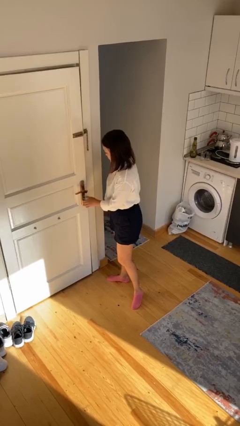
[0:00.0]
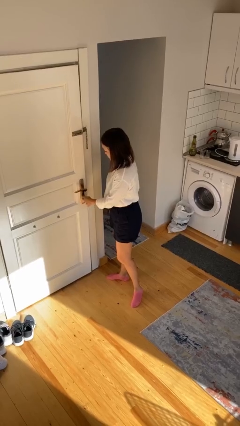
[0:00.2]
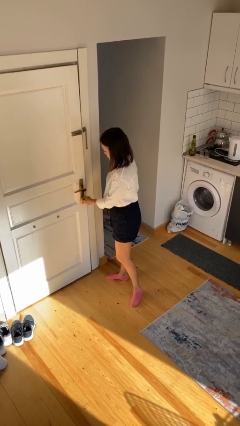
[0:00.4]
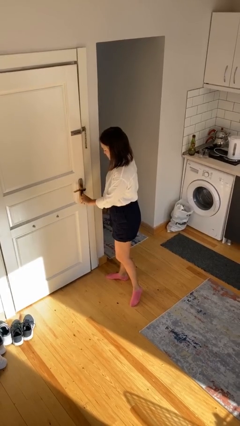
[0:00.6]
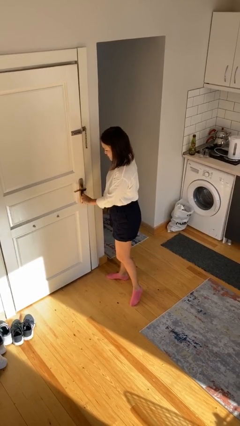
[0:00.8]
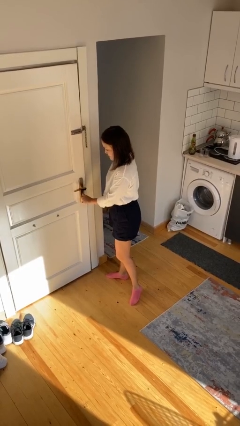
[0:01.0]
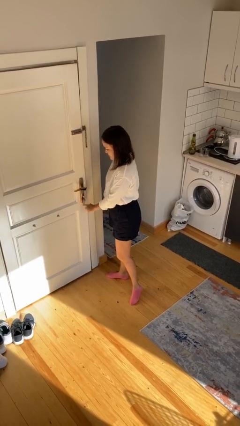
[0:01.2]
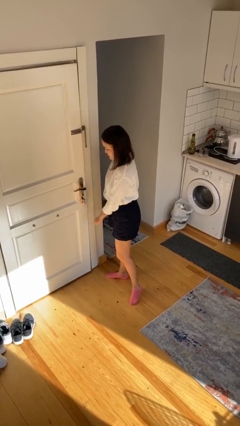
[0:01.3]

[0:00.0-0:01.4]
person locks door with keys

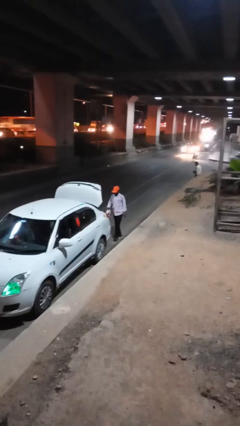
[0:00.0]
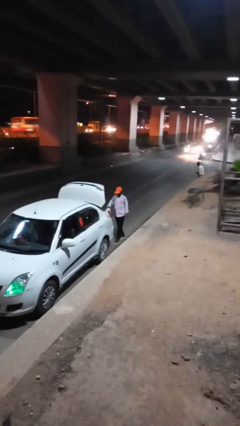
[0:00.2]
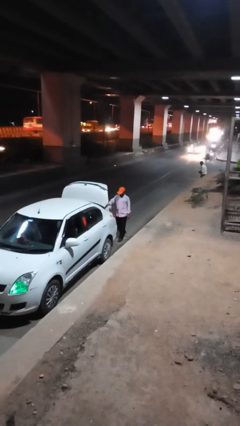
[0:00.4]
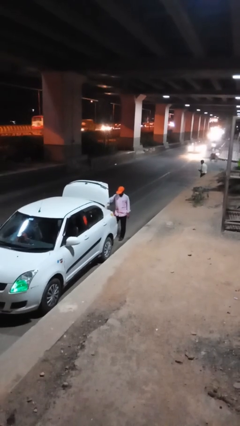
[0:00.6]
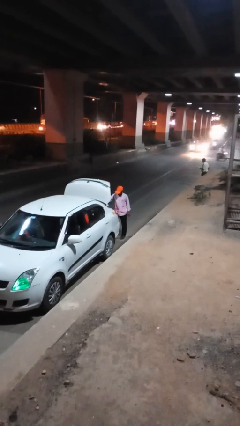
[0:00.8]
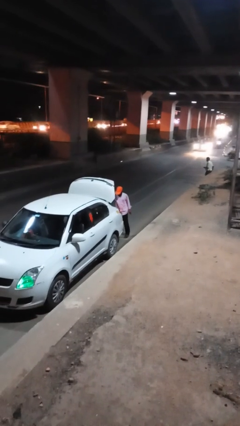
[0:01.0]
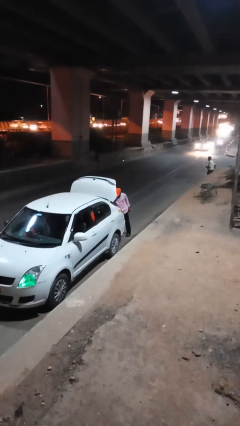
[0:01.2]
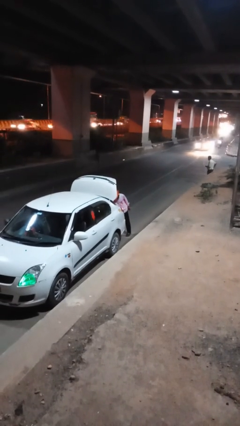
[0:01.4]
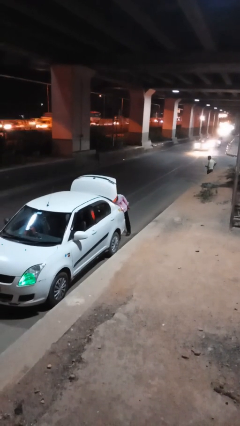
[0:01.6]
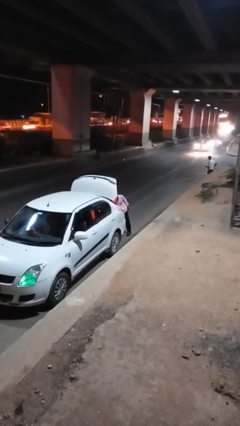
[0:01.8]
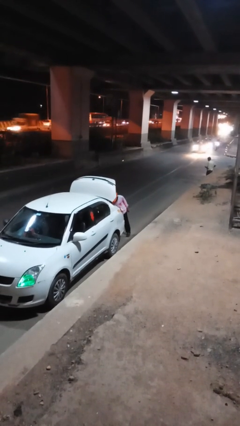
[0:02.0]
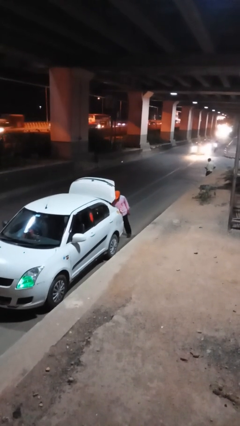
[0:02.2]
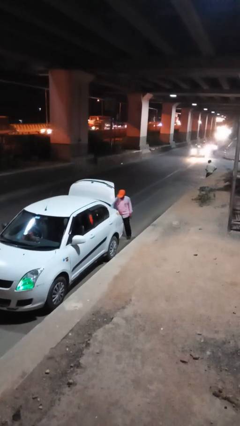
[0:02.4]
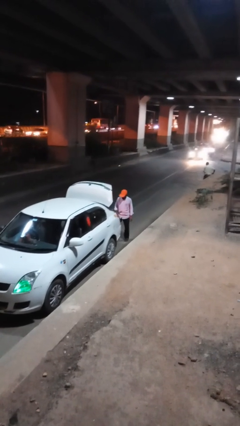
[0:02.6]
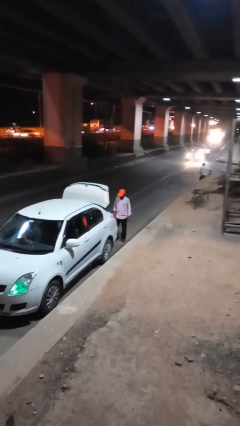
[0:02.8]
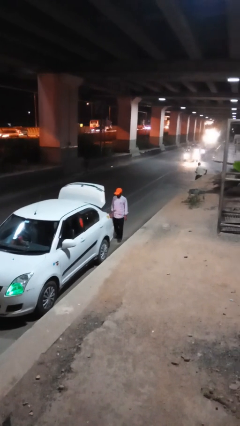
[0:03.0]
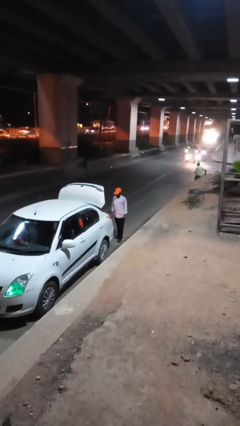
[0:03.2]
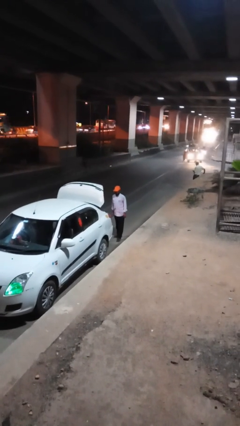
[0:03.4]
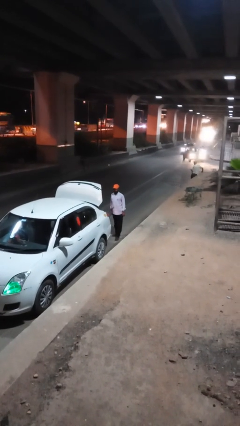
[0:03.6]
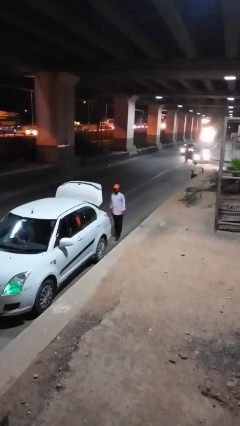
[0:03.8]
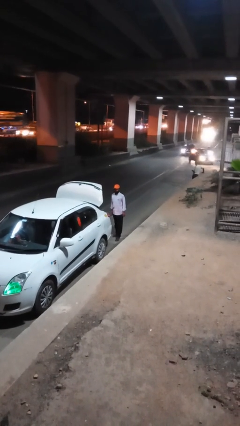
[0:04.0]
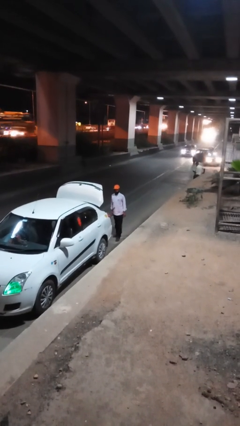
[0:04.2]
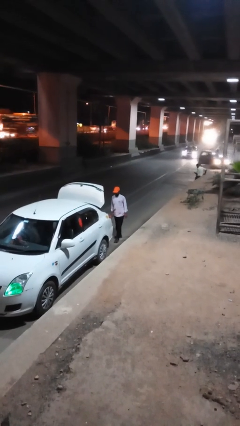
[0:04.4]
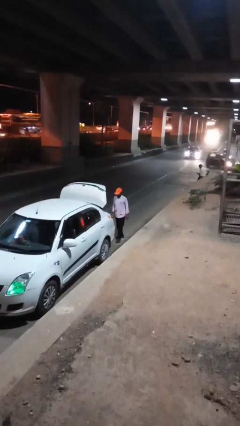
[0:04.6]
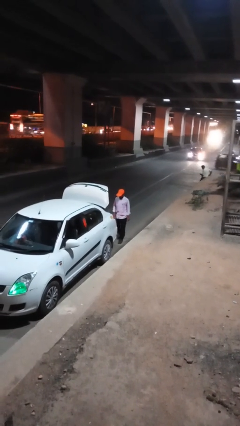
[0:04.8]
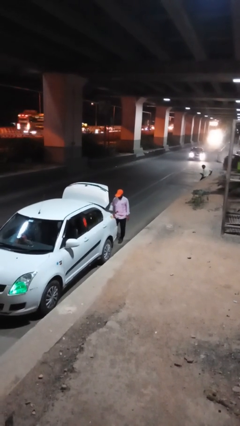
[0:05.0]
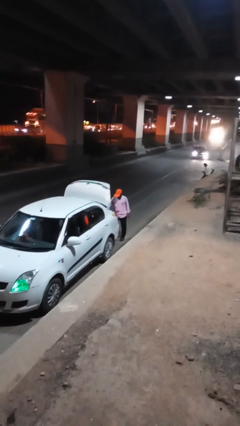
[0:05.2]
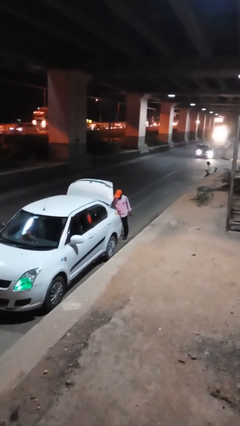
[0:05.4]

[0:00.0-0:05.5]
person loads car

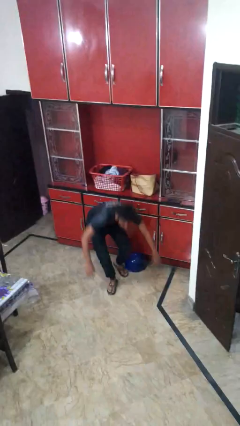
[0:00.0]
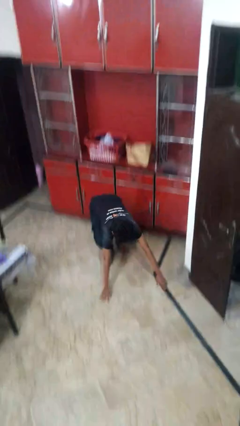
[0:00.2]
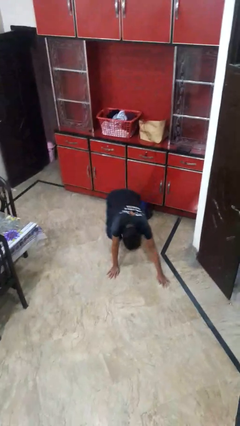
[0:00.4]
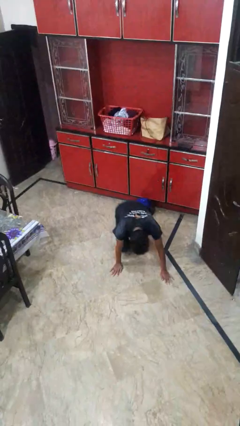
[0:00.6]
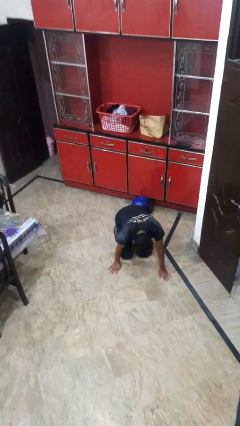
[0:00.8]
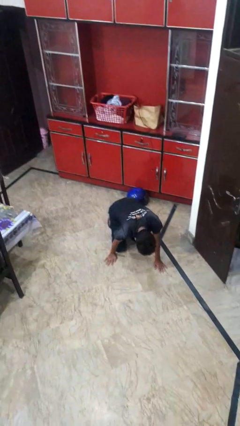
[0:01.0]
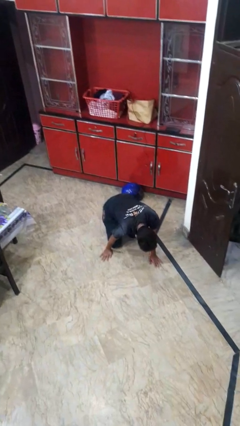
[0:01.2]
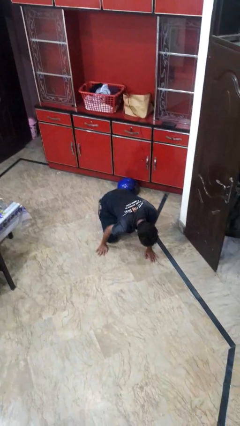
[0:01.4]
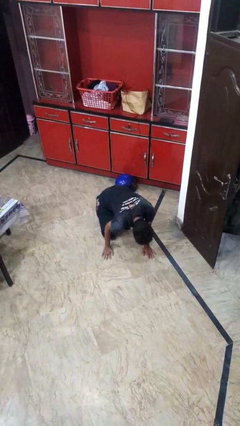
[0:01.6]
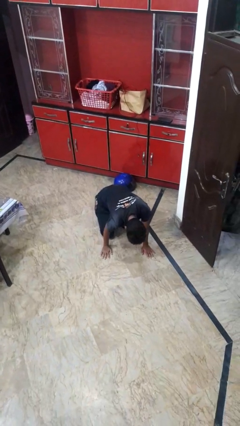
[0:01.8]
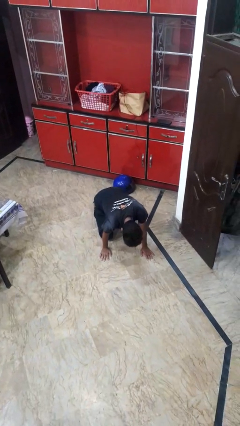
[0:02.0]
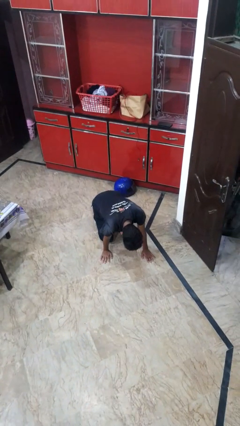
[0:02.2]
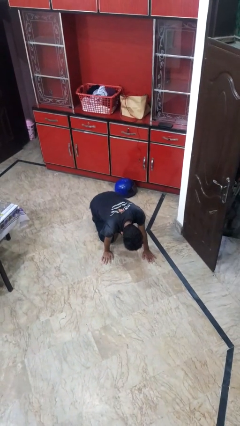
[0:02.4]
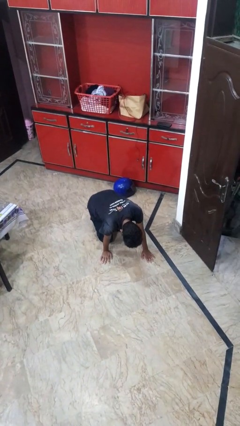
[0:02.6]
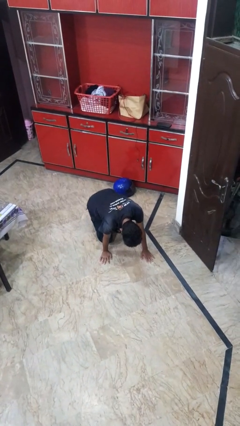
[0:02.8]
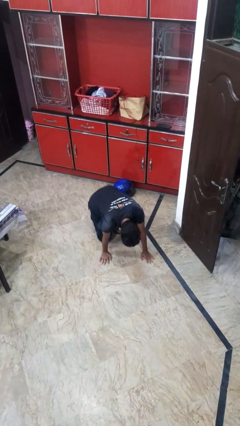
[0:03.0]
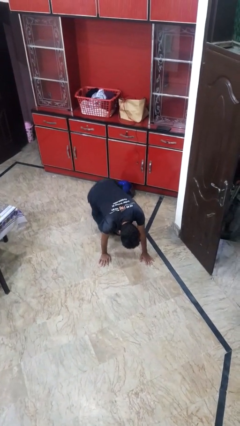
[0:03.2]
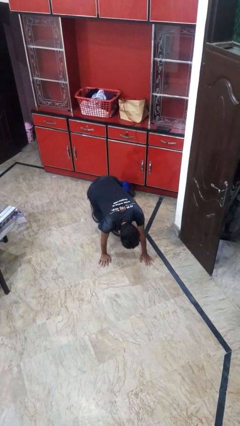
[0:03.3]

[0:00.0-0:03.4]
person trips on object on floor

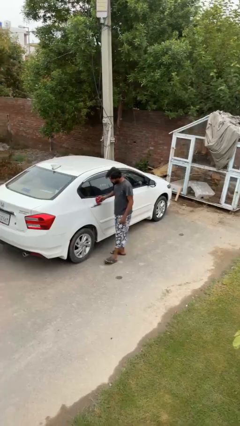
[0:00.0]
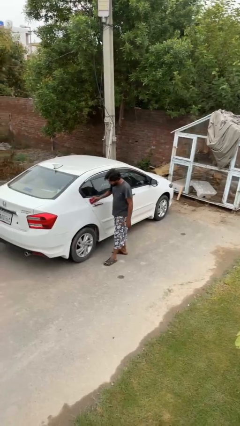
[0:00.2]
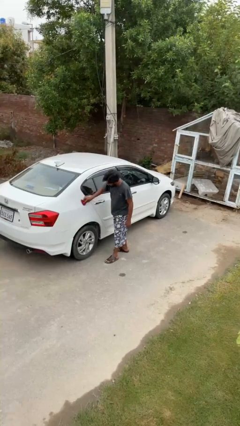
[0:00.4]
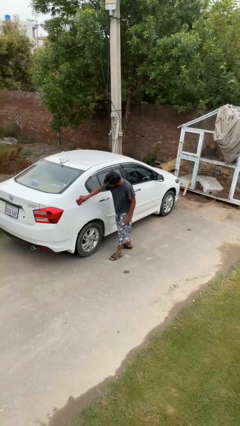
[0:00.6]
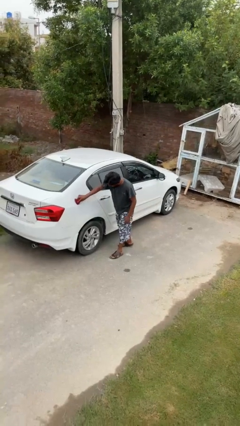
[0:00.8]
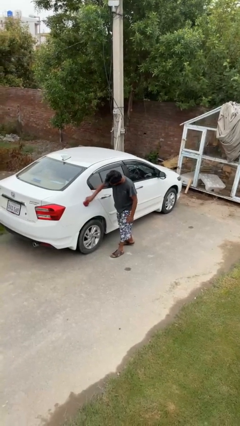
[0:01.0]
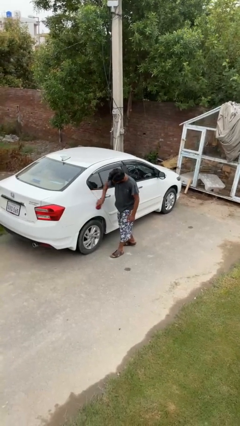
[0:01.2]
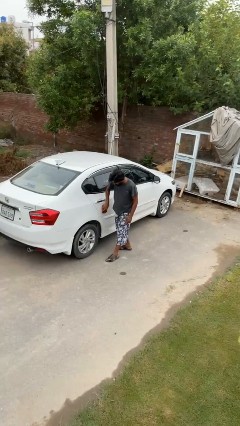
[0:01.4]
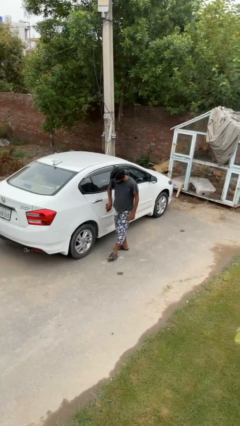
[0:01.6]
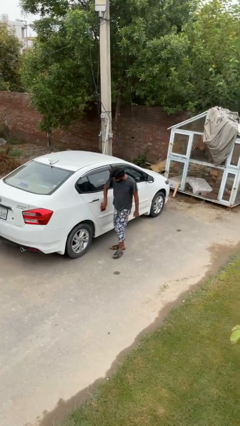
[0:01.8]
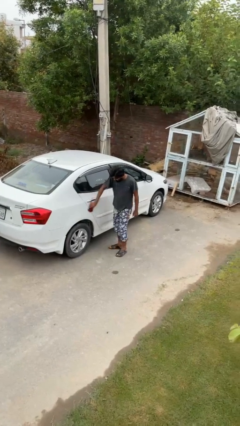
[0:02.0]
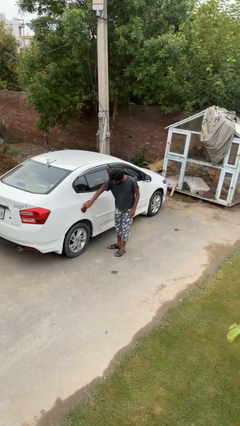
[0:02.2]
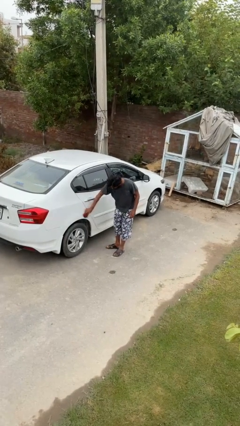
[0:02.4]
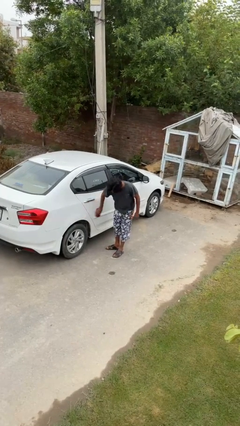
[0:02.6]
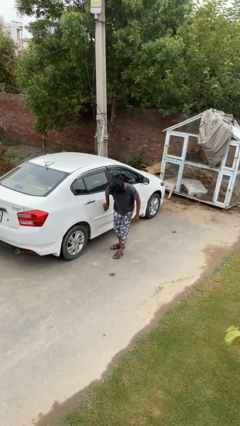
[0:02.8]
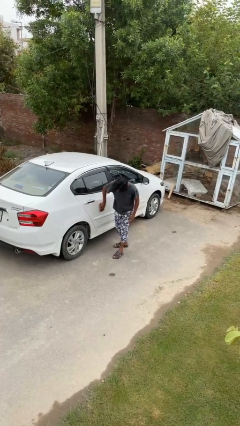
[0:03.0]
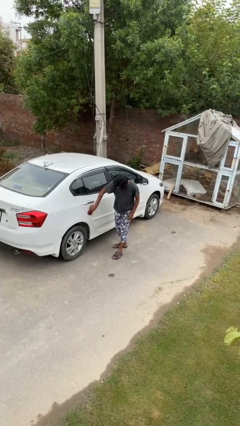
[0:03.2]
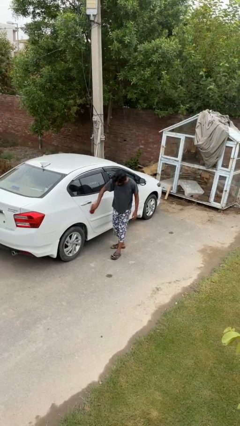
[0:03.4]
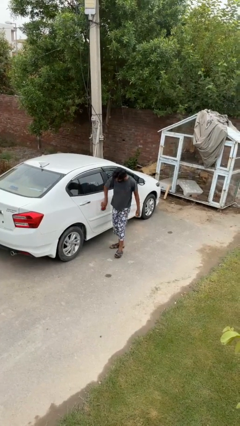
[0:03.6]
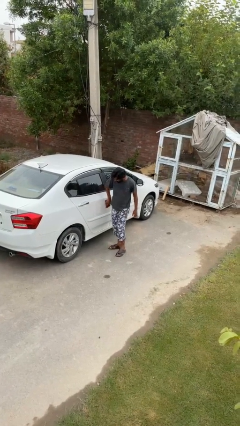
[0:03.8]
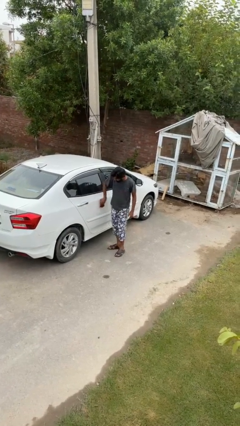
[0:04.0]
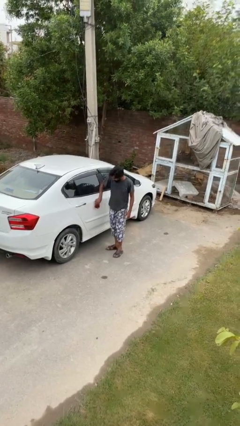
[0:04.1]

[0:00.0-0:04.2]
person polishes car with rag

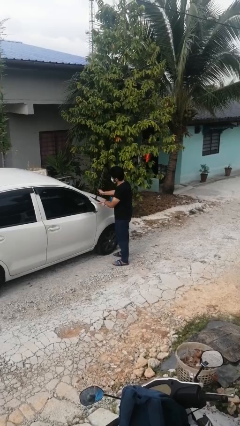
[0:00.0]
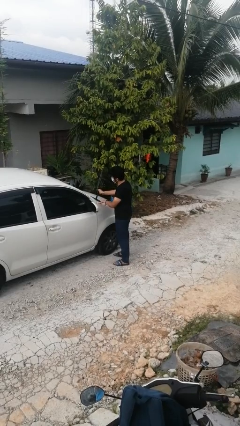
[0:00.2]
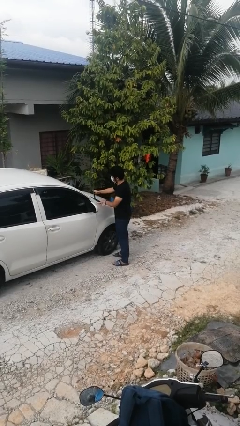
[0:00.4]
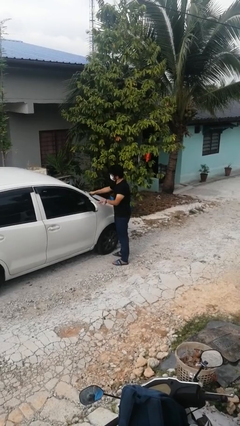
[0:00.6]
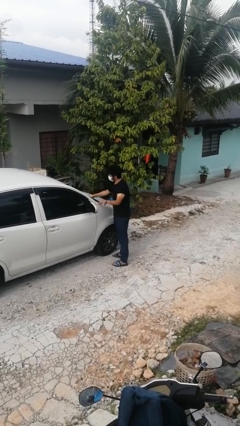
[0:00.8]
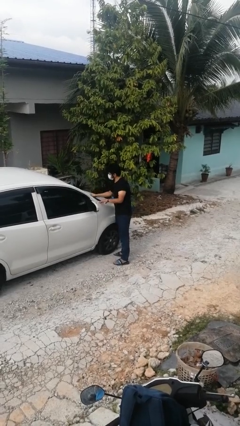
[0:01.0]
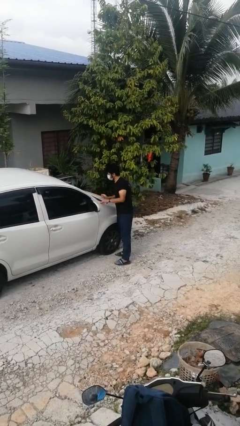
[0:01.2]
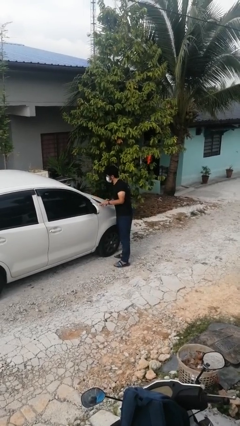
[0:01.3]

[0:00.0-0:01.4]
person flips down car wipers

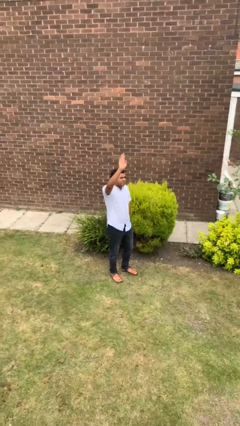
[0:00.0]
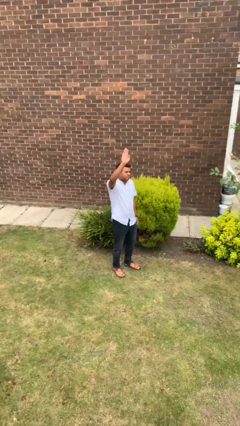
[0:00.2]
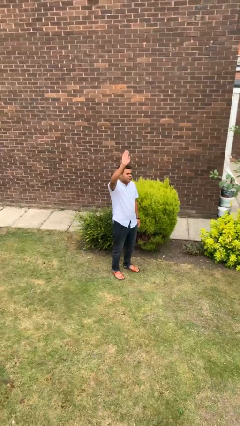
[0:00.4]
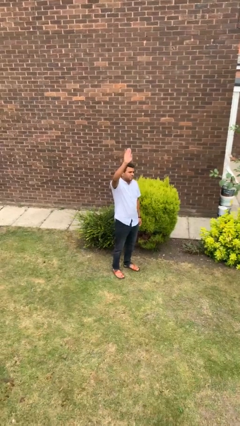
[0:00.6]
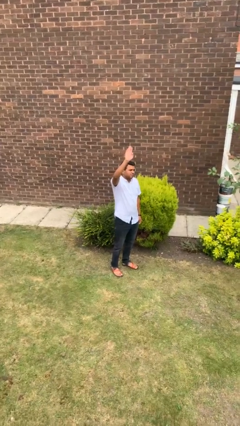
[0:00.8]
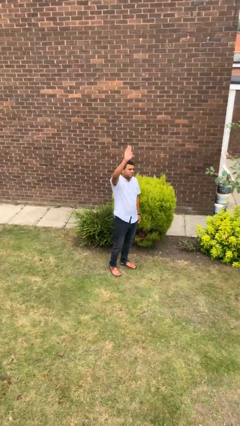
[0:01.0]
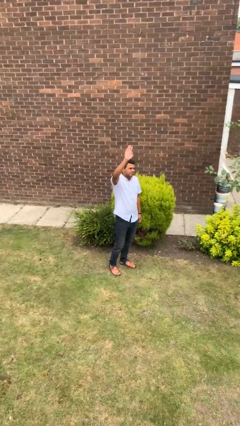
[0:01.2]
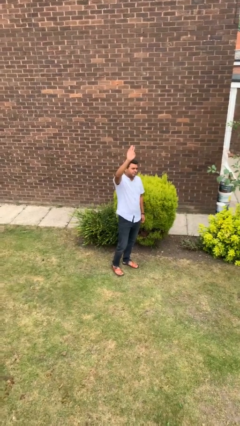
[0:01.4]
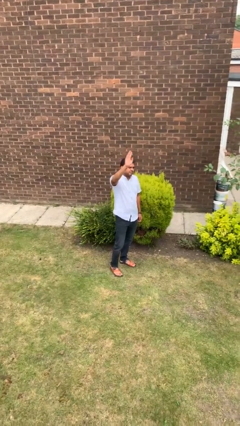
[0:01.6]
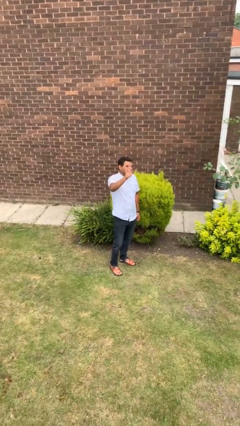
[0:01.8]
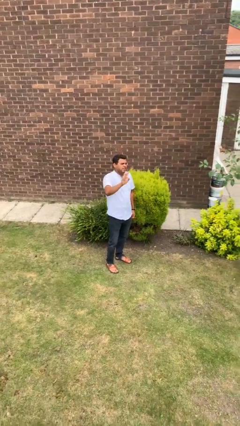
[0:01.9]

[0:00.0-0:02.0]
person gestures raise hand
